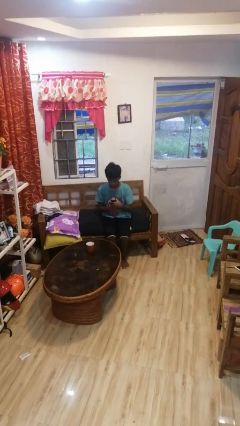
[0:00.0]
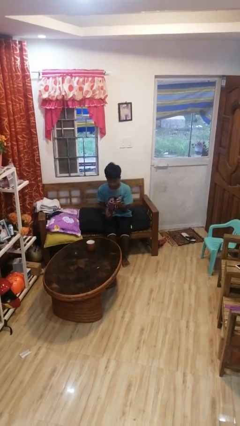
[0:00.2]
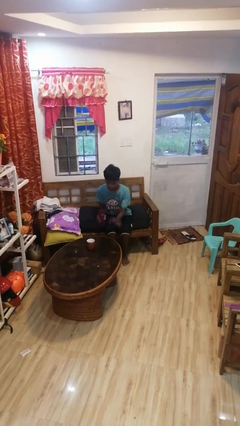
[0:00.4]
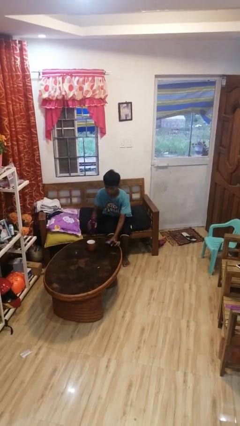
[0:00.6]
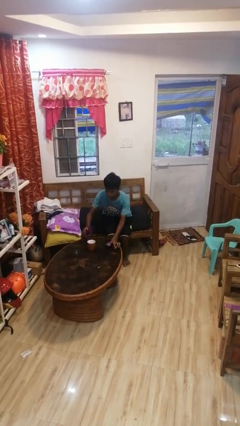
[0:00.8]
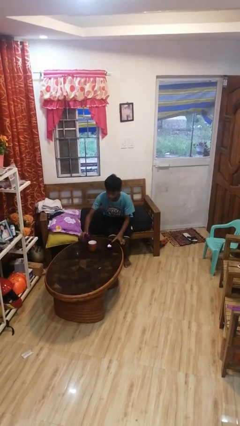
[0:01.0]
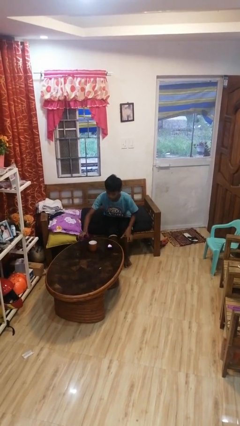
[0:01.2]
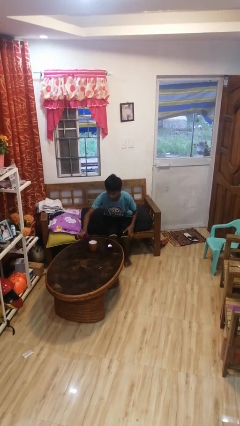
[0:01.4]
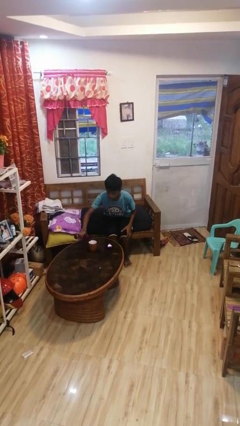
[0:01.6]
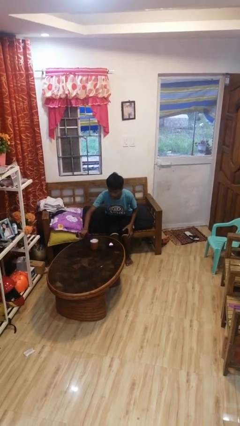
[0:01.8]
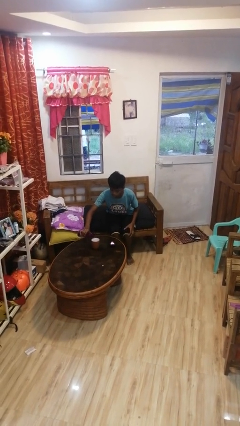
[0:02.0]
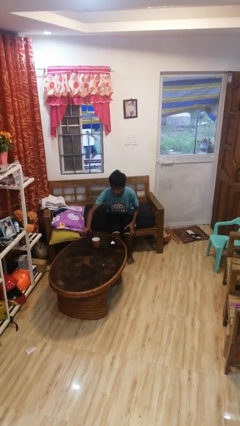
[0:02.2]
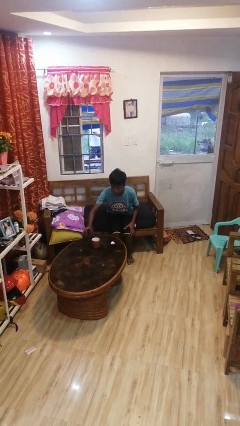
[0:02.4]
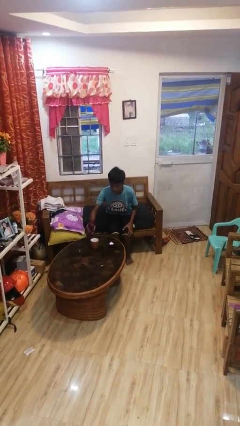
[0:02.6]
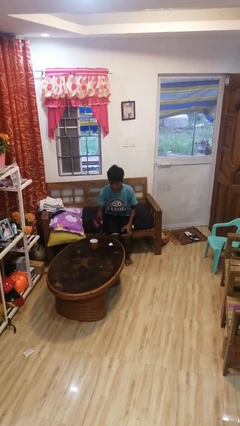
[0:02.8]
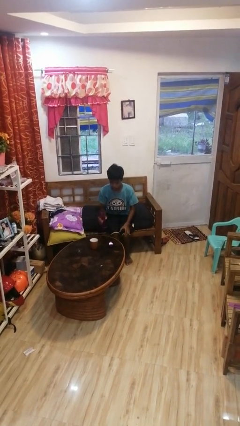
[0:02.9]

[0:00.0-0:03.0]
person pours liquid into cup

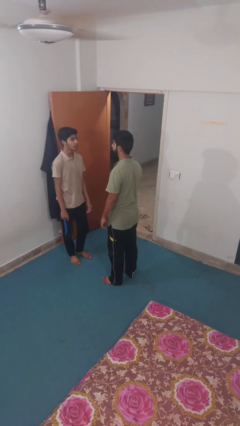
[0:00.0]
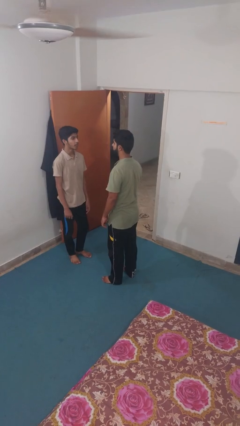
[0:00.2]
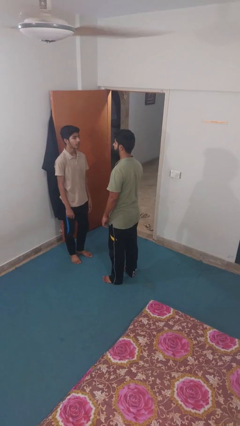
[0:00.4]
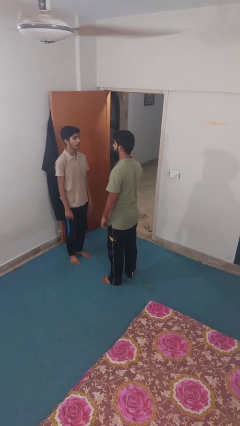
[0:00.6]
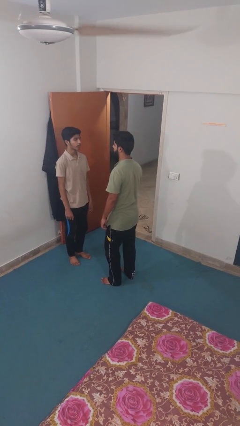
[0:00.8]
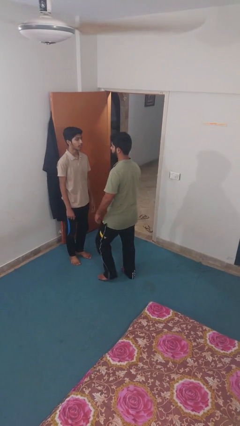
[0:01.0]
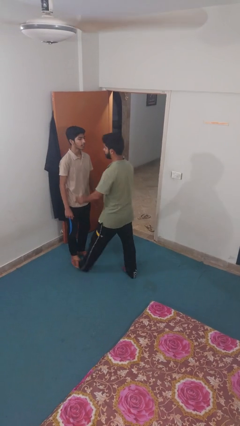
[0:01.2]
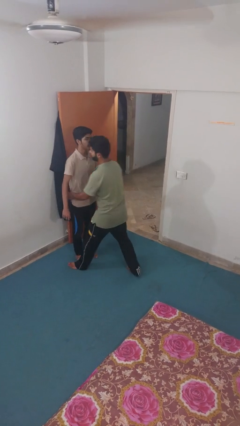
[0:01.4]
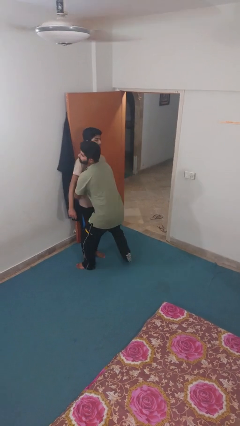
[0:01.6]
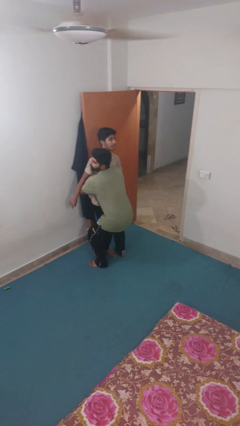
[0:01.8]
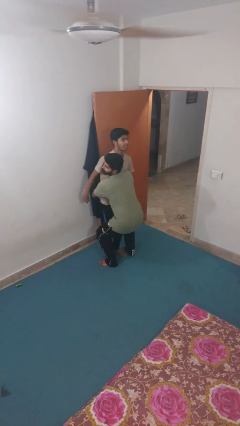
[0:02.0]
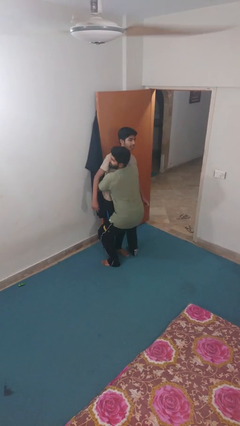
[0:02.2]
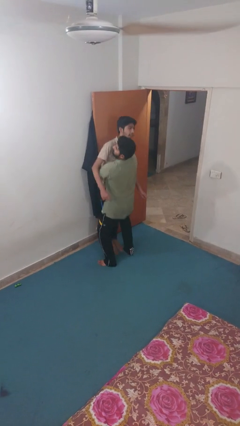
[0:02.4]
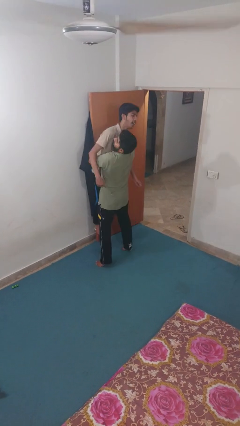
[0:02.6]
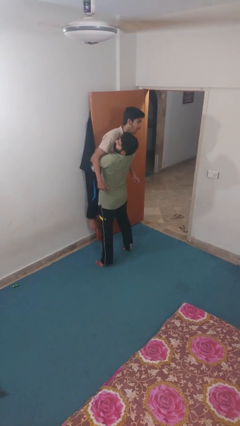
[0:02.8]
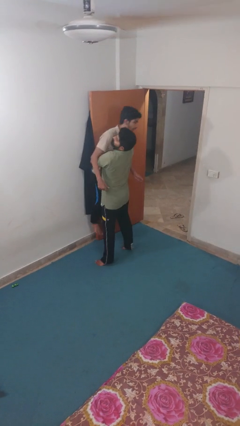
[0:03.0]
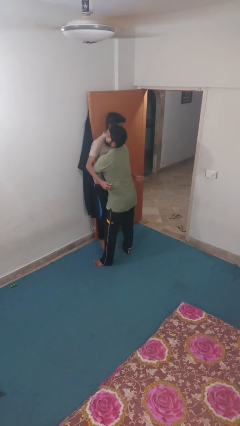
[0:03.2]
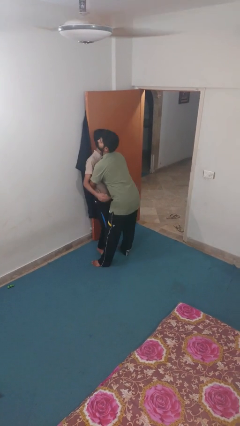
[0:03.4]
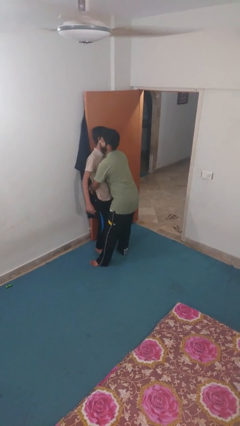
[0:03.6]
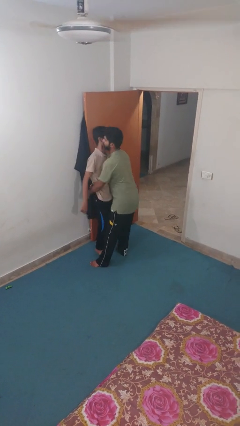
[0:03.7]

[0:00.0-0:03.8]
person picks up person

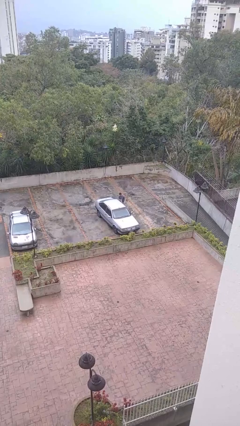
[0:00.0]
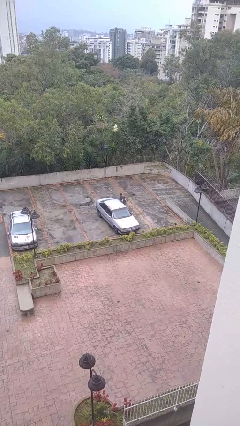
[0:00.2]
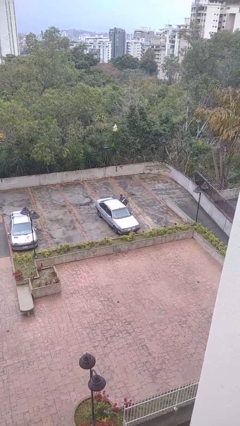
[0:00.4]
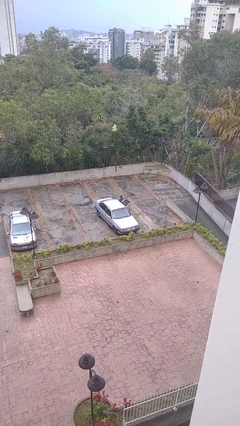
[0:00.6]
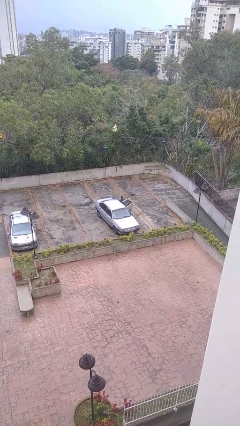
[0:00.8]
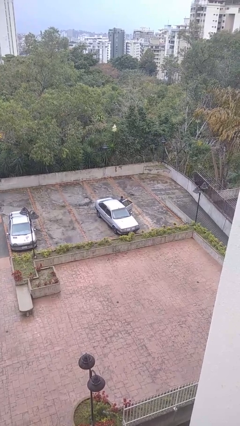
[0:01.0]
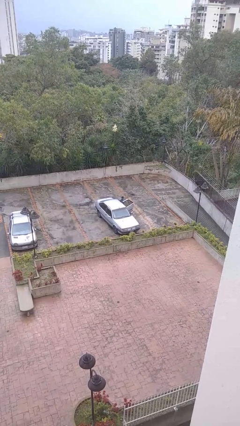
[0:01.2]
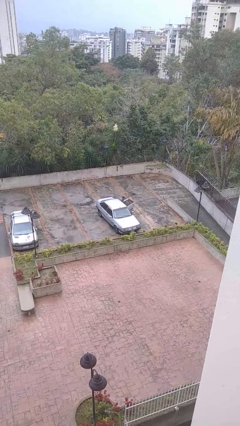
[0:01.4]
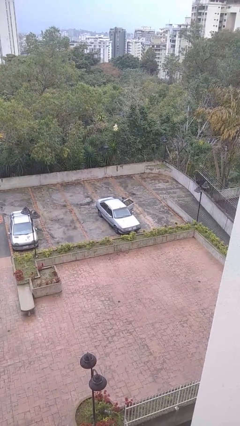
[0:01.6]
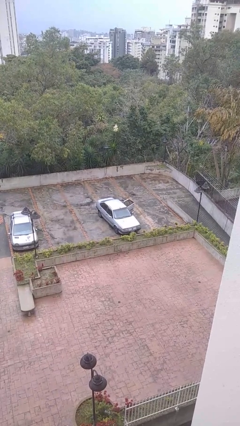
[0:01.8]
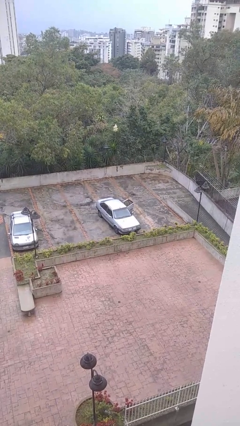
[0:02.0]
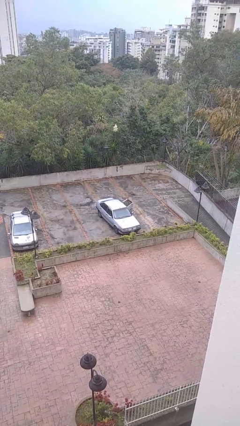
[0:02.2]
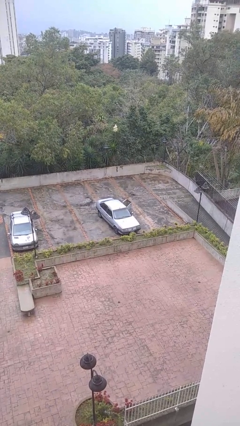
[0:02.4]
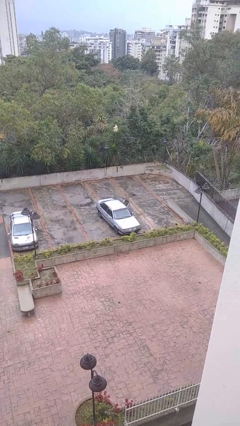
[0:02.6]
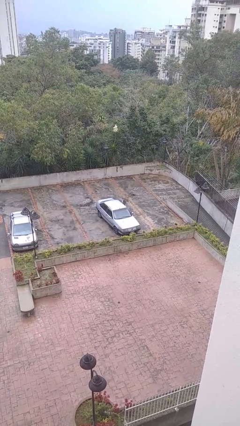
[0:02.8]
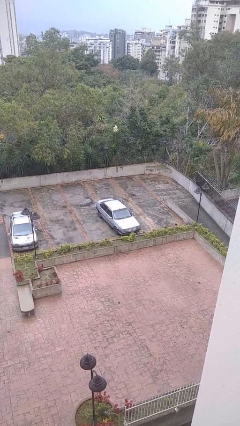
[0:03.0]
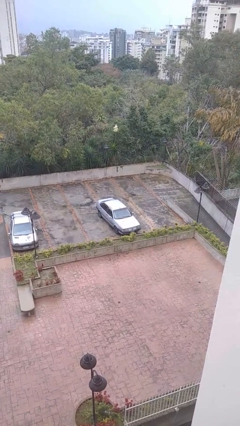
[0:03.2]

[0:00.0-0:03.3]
car picks up person

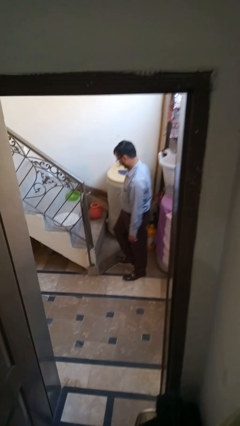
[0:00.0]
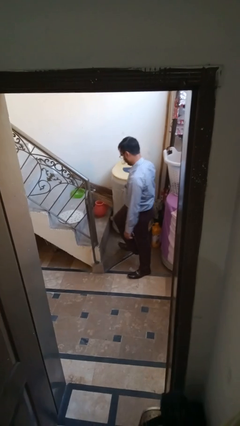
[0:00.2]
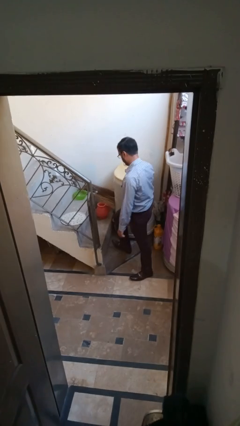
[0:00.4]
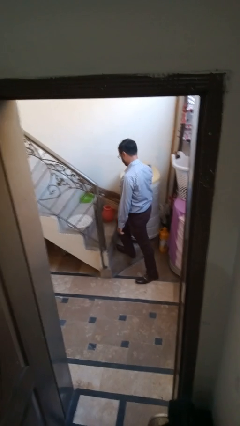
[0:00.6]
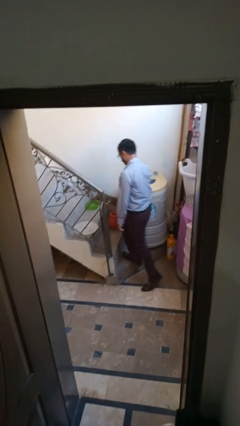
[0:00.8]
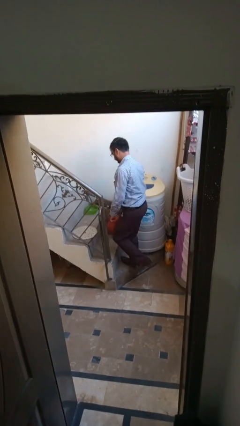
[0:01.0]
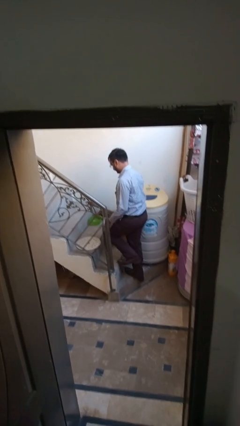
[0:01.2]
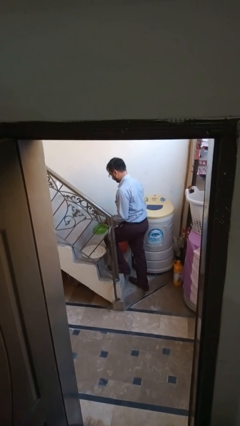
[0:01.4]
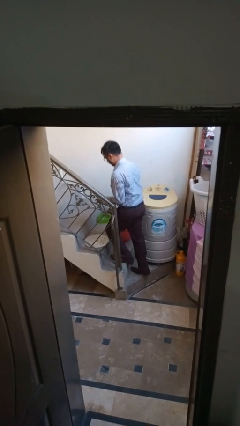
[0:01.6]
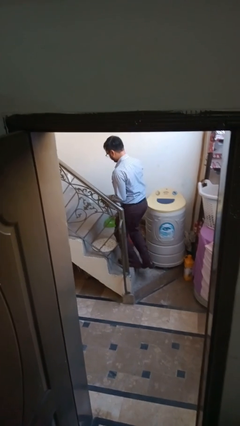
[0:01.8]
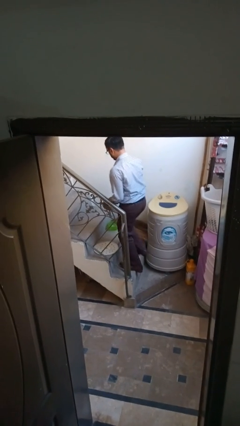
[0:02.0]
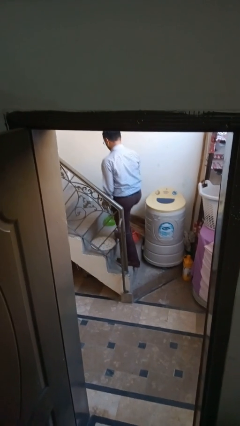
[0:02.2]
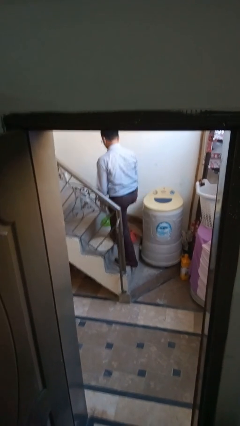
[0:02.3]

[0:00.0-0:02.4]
person climbs up stairs

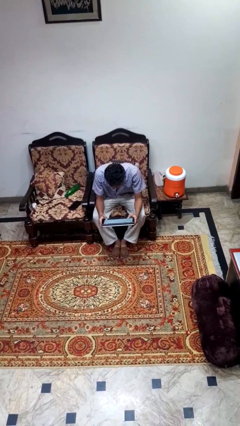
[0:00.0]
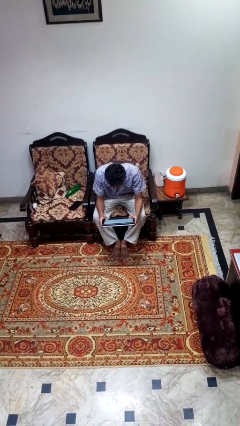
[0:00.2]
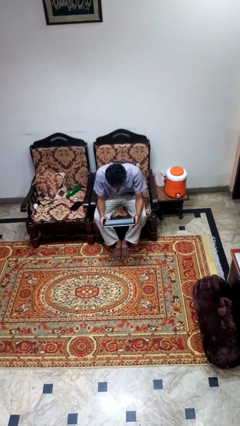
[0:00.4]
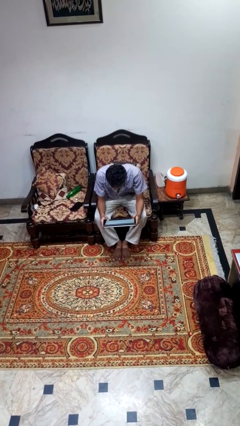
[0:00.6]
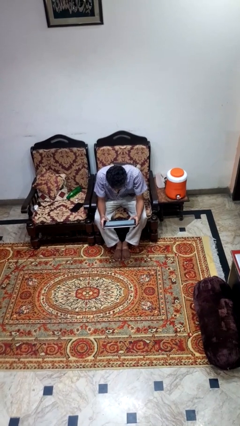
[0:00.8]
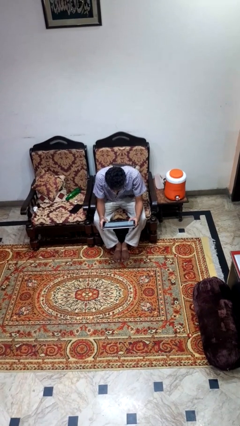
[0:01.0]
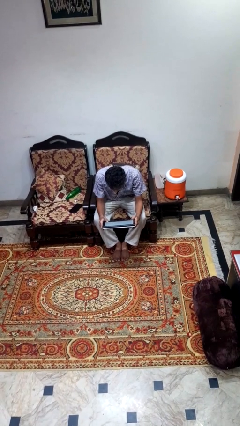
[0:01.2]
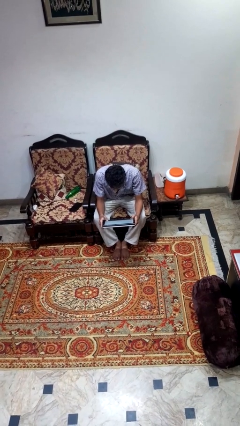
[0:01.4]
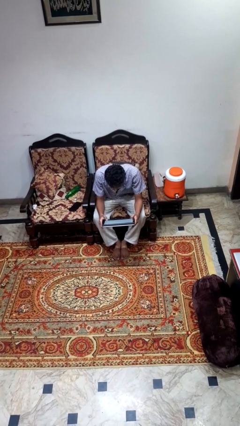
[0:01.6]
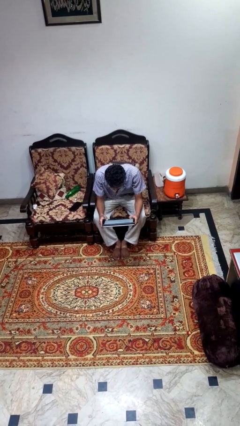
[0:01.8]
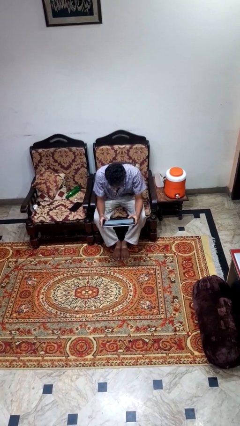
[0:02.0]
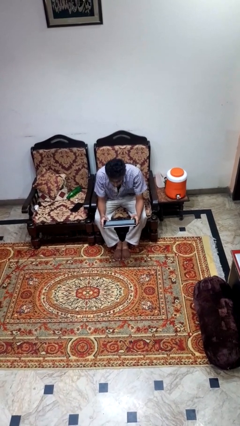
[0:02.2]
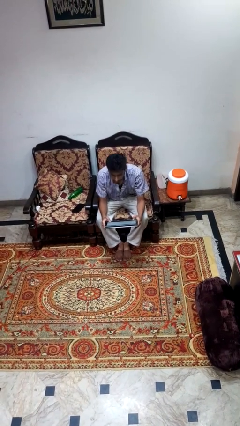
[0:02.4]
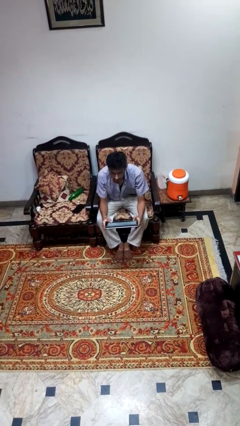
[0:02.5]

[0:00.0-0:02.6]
person reads newspaper

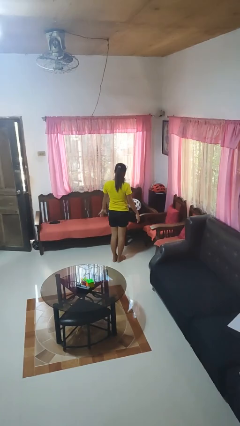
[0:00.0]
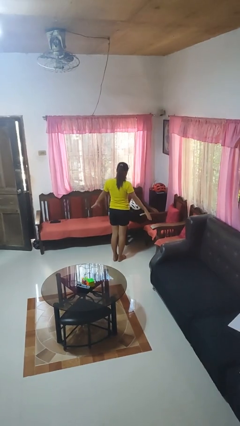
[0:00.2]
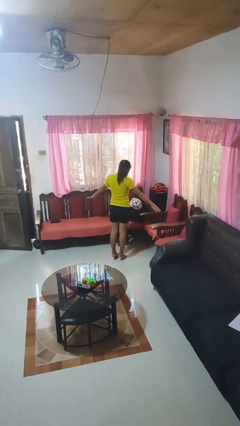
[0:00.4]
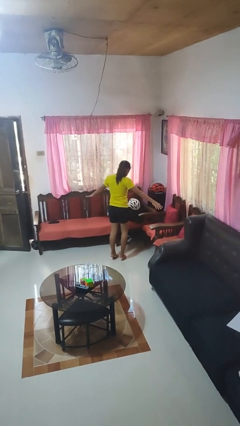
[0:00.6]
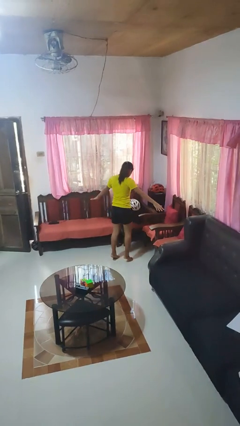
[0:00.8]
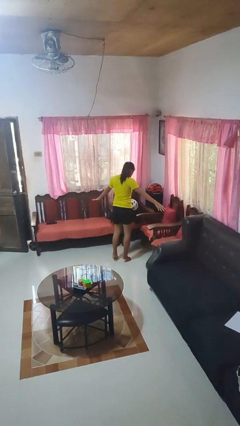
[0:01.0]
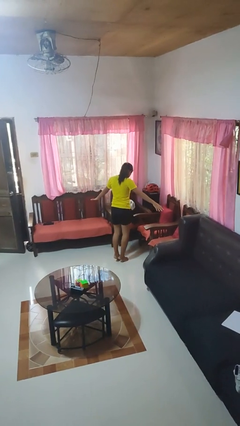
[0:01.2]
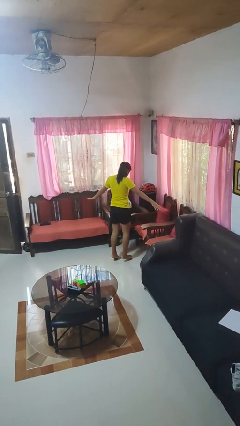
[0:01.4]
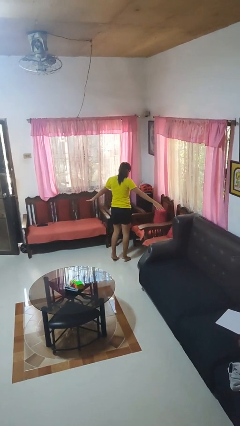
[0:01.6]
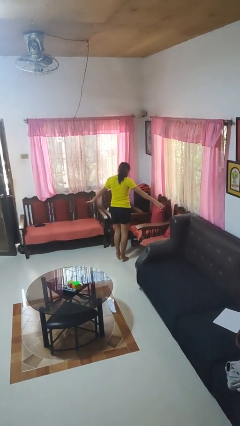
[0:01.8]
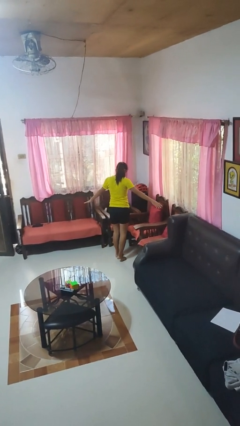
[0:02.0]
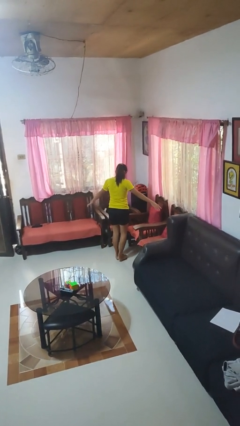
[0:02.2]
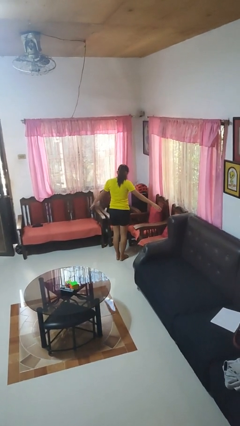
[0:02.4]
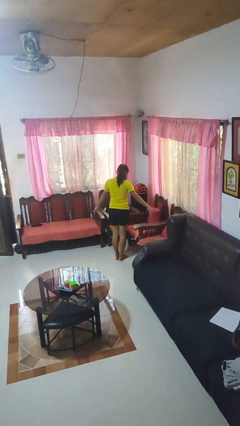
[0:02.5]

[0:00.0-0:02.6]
person walks tiptoe
